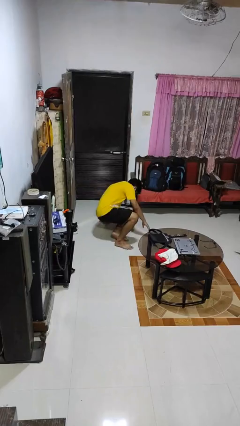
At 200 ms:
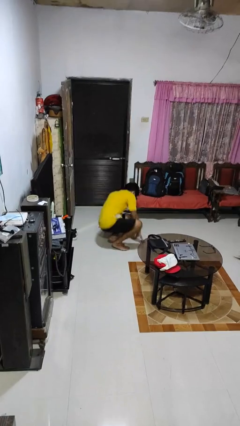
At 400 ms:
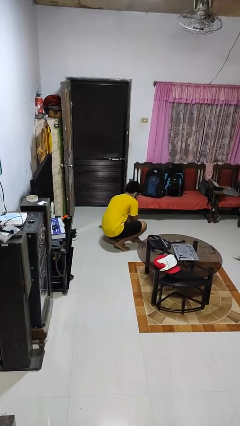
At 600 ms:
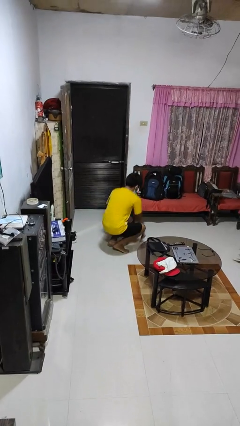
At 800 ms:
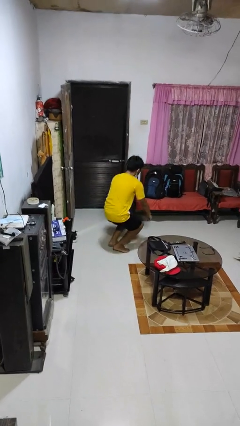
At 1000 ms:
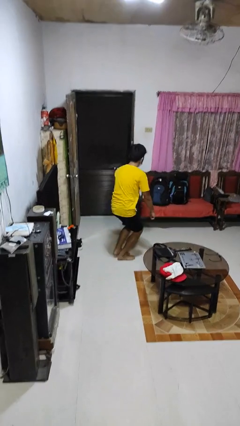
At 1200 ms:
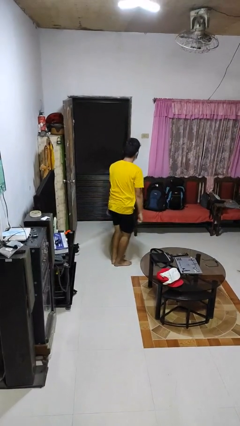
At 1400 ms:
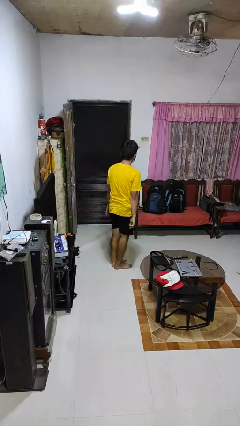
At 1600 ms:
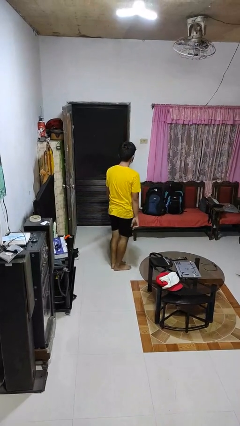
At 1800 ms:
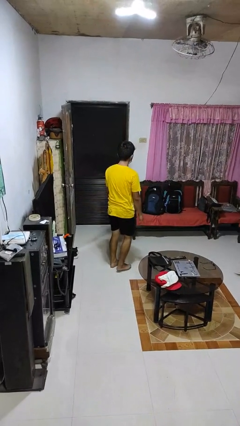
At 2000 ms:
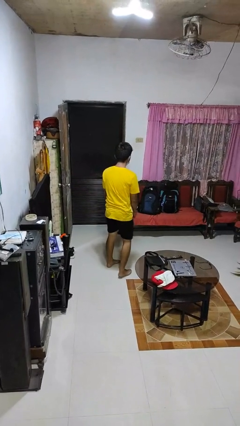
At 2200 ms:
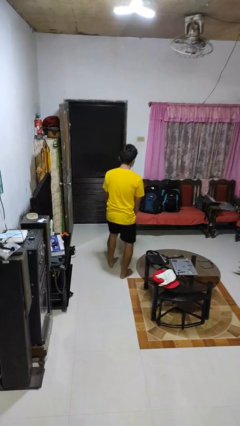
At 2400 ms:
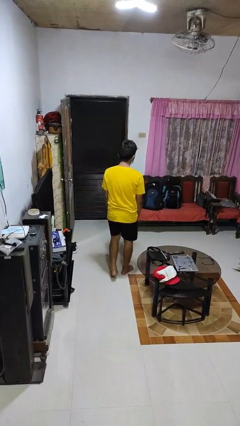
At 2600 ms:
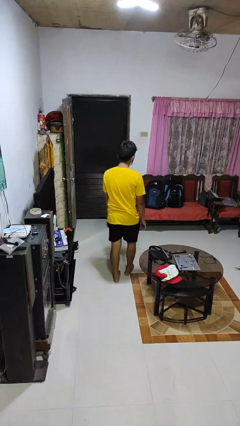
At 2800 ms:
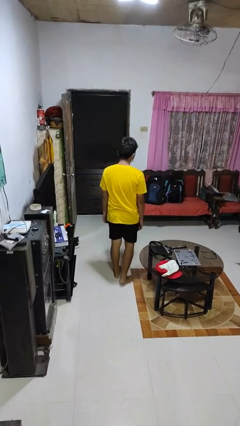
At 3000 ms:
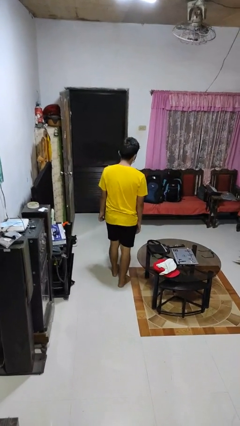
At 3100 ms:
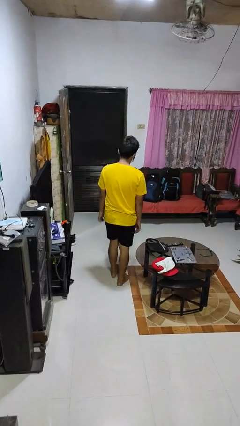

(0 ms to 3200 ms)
person stands up from floor

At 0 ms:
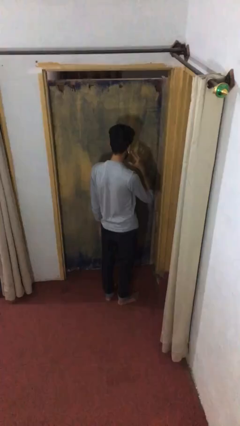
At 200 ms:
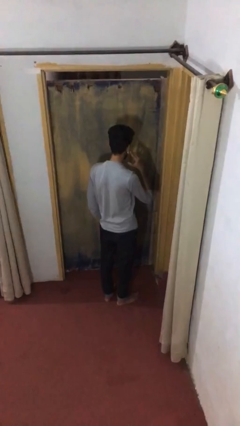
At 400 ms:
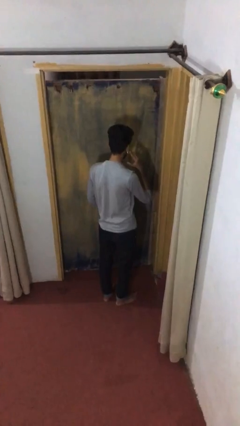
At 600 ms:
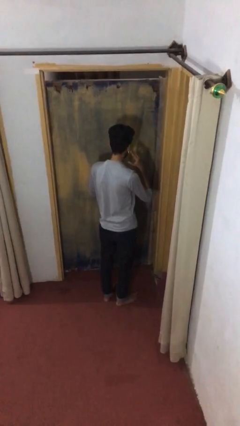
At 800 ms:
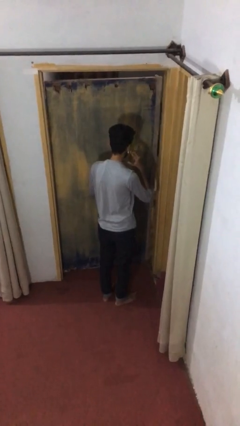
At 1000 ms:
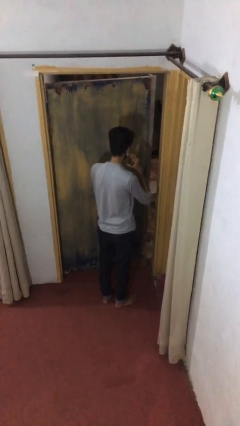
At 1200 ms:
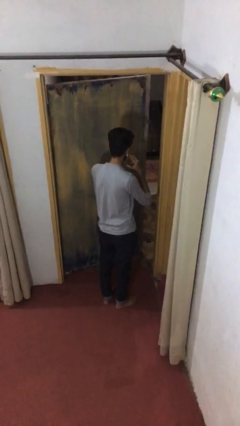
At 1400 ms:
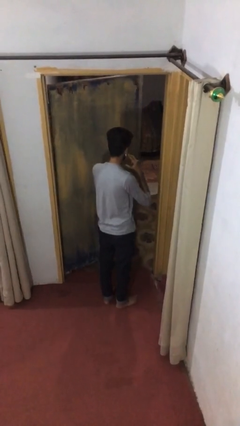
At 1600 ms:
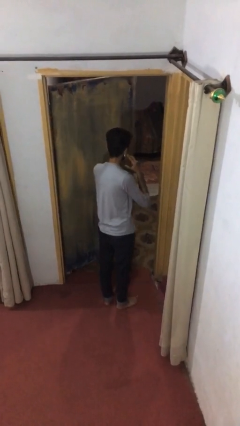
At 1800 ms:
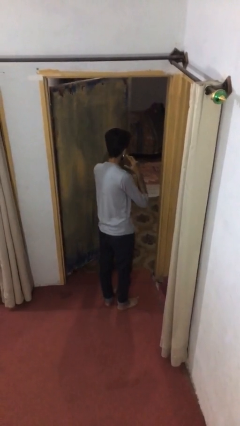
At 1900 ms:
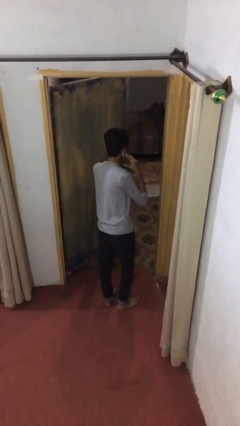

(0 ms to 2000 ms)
person opens facility door

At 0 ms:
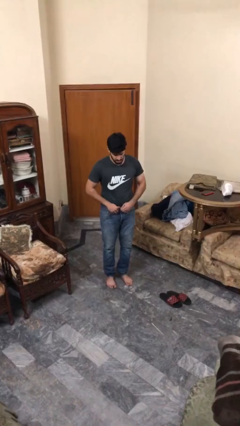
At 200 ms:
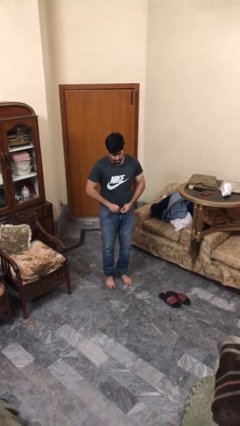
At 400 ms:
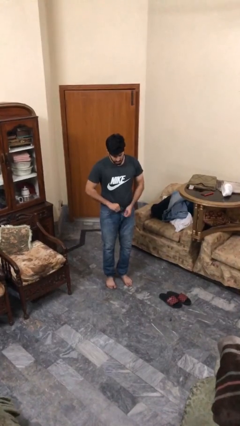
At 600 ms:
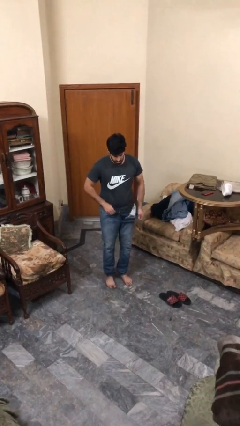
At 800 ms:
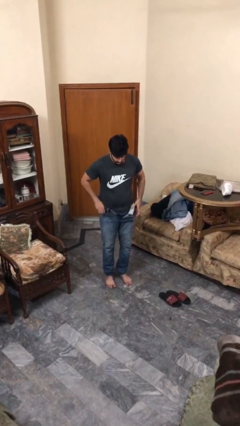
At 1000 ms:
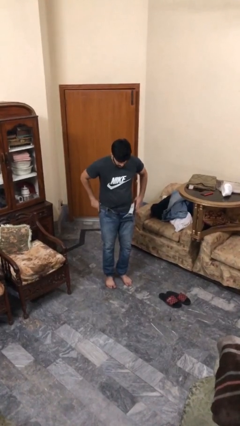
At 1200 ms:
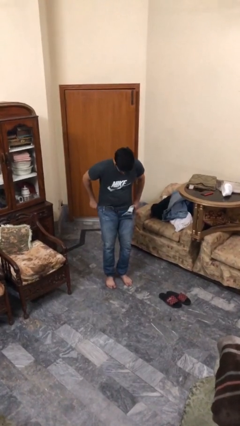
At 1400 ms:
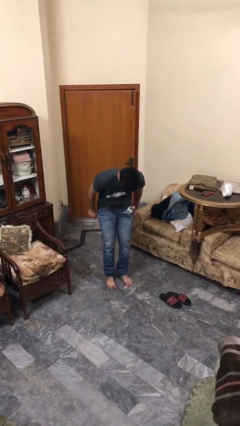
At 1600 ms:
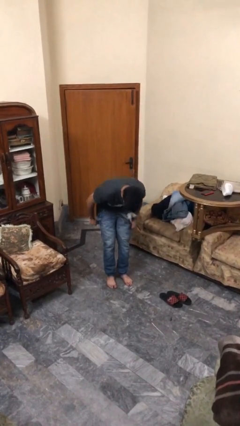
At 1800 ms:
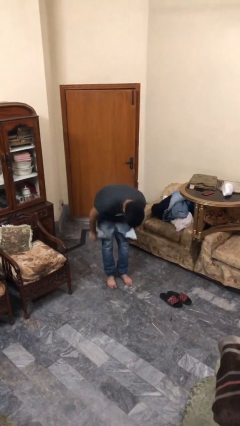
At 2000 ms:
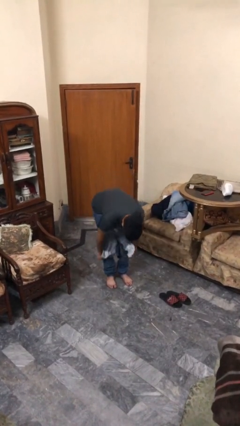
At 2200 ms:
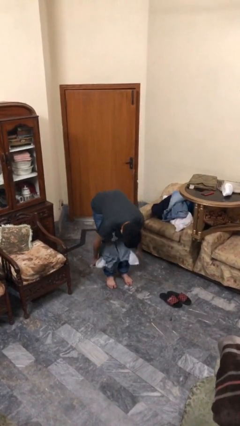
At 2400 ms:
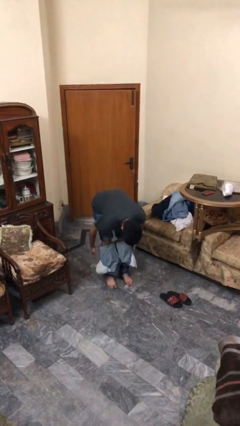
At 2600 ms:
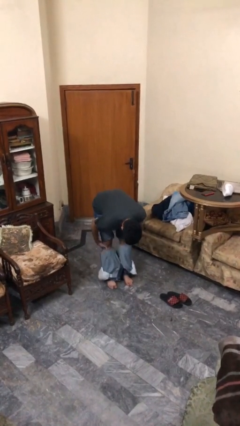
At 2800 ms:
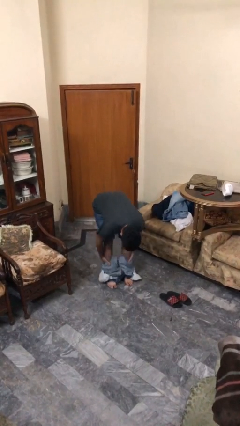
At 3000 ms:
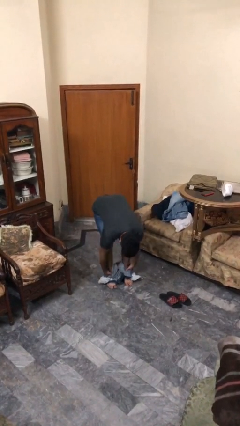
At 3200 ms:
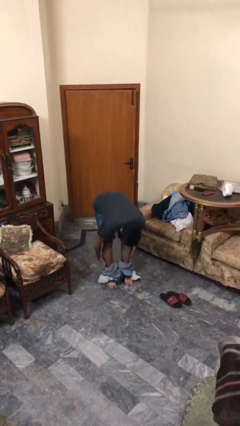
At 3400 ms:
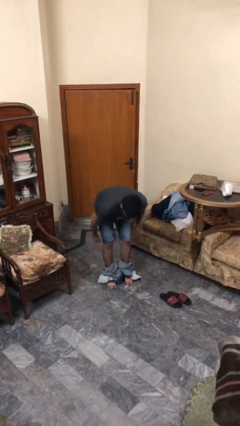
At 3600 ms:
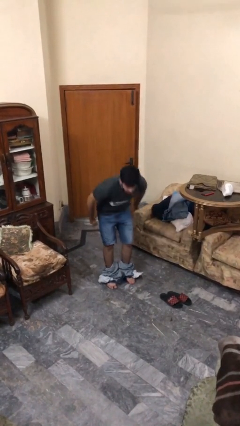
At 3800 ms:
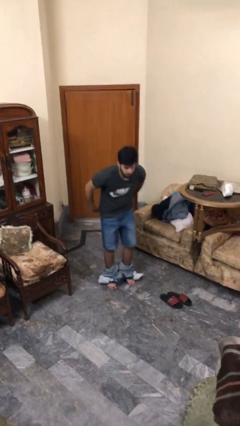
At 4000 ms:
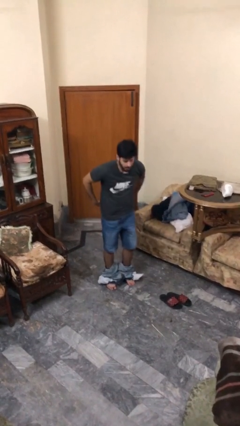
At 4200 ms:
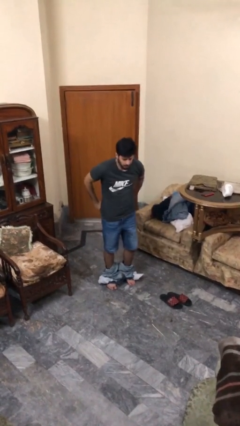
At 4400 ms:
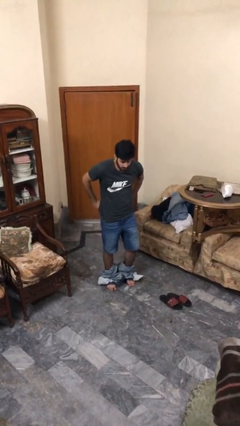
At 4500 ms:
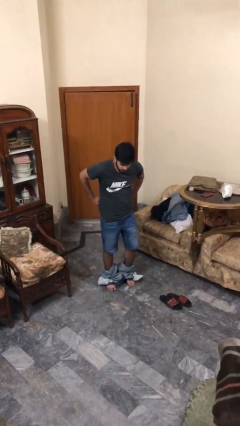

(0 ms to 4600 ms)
person takes off pants

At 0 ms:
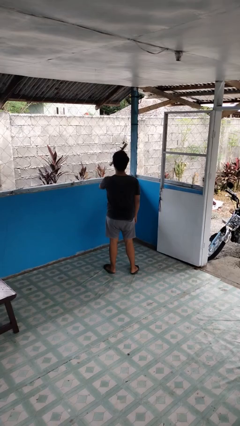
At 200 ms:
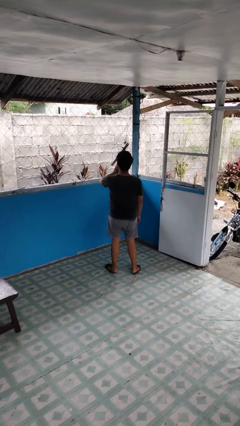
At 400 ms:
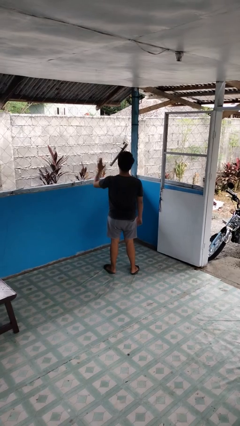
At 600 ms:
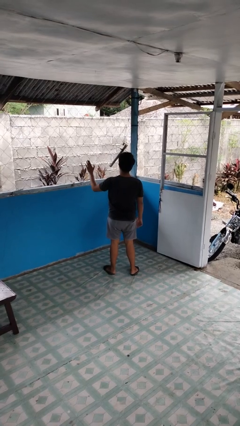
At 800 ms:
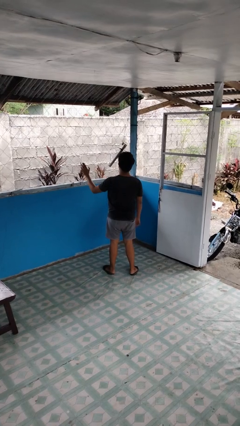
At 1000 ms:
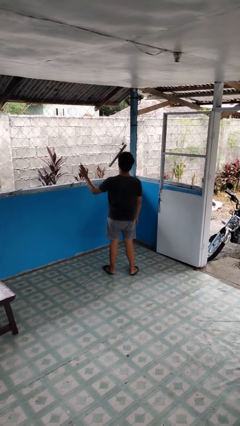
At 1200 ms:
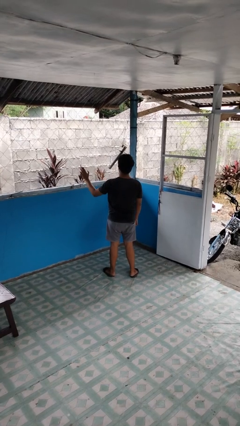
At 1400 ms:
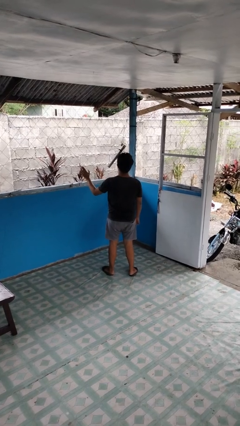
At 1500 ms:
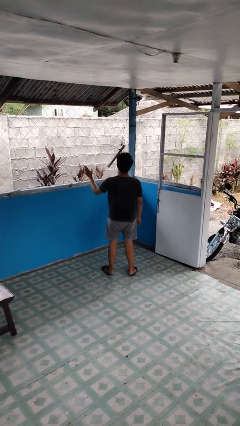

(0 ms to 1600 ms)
person gestures swipe left

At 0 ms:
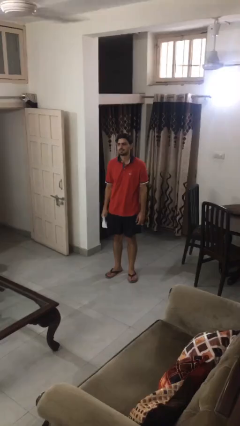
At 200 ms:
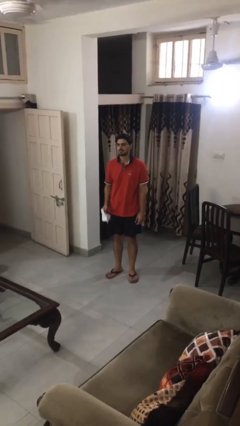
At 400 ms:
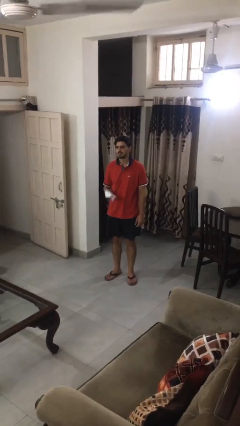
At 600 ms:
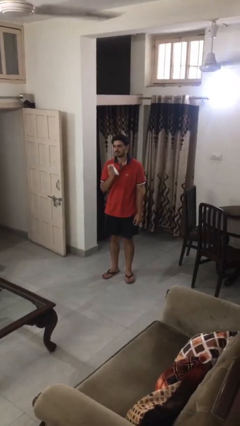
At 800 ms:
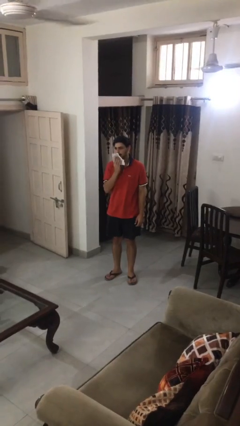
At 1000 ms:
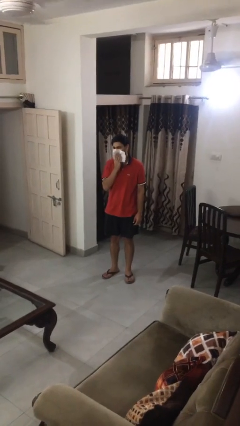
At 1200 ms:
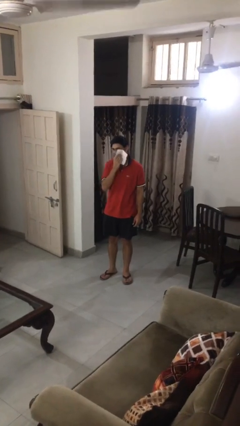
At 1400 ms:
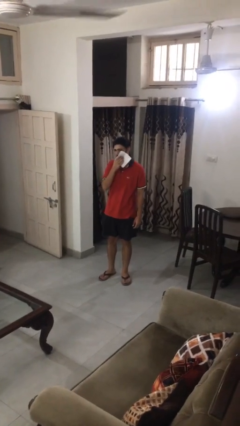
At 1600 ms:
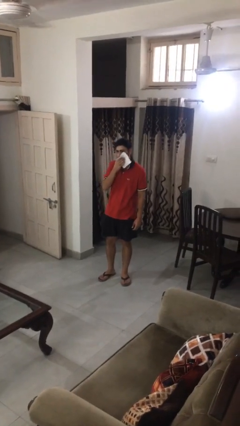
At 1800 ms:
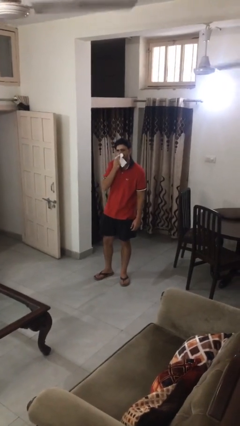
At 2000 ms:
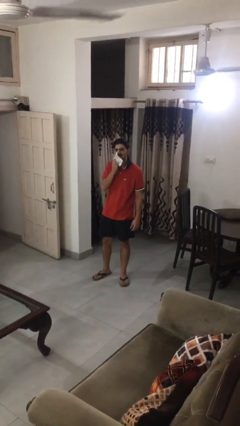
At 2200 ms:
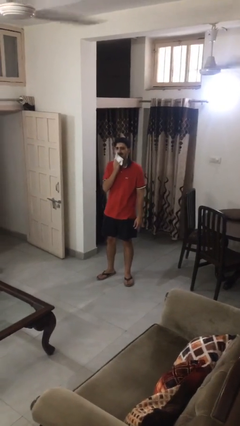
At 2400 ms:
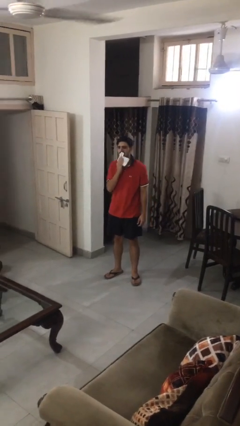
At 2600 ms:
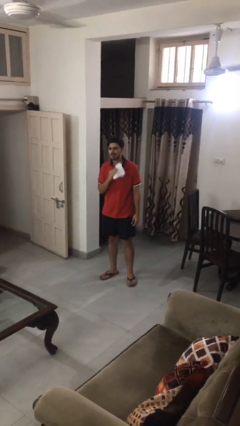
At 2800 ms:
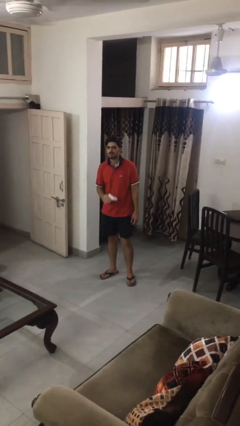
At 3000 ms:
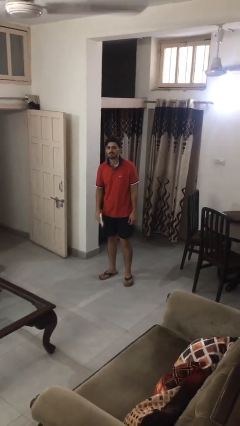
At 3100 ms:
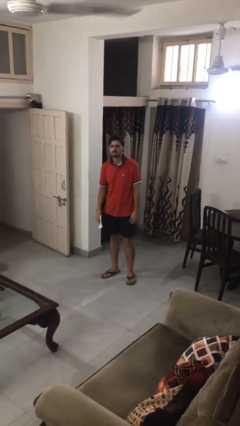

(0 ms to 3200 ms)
person wipes mouth with napkin

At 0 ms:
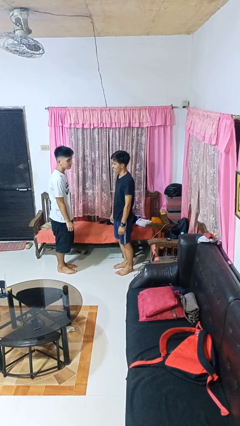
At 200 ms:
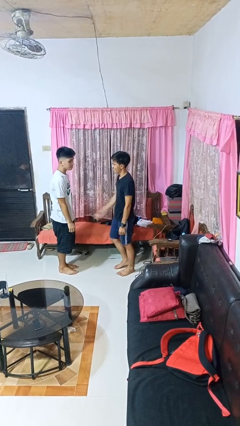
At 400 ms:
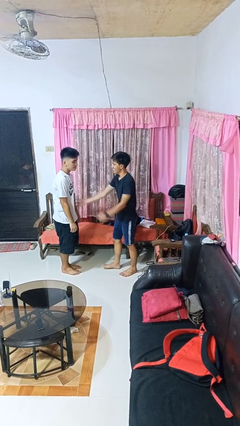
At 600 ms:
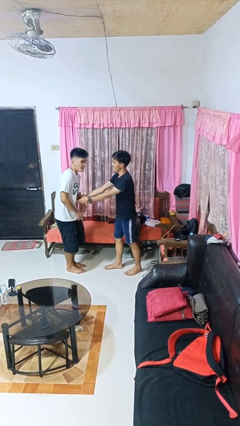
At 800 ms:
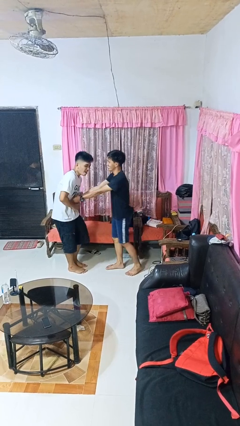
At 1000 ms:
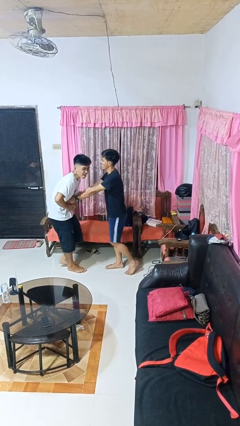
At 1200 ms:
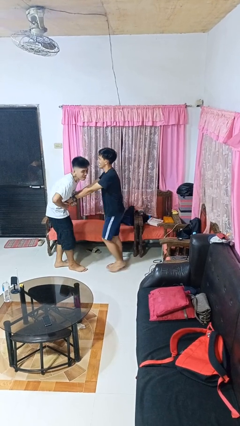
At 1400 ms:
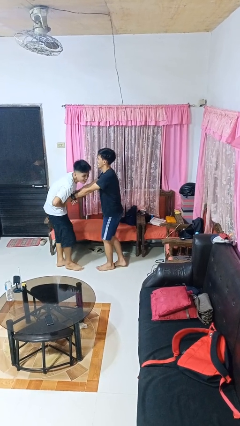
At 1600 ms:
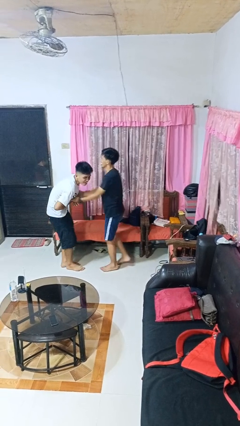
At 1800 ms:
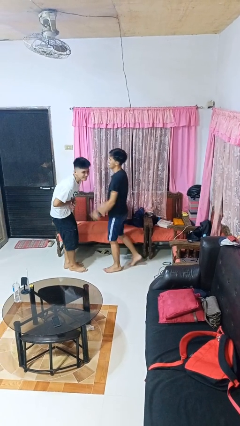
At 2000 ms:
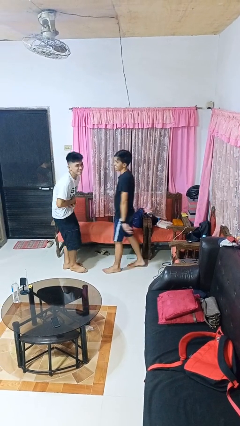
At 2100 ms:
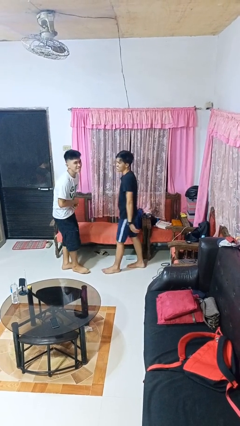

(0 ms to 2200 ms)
person tickles person

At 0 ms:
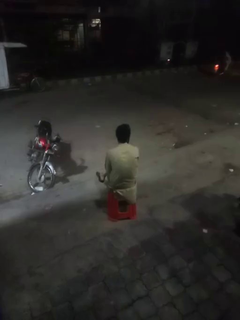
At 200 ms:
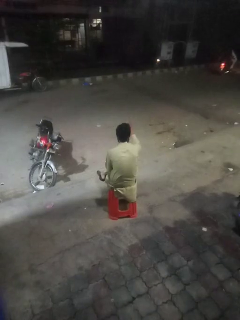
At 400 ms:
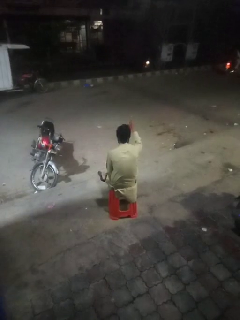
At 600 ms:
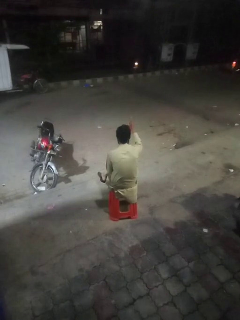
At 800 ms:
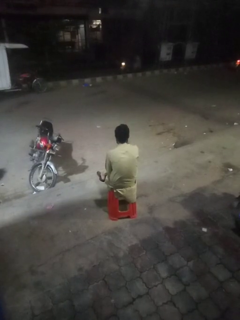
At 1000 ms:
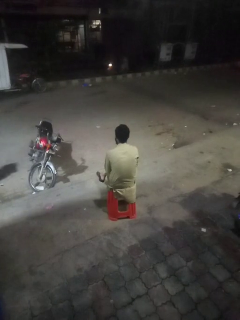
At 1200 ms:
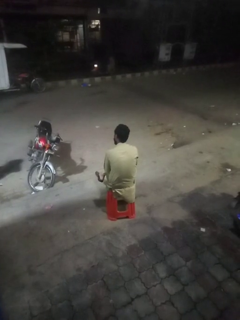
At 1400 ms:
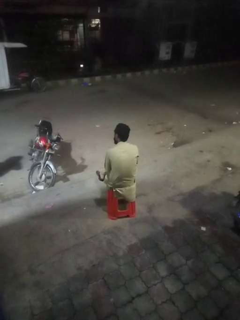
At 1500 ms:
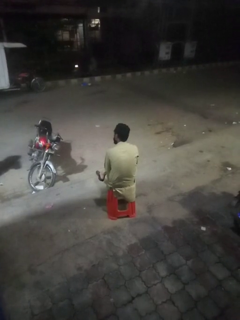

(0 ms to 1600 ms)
person gestures number one
